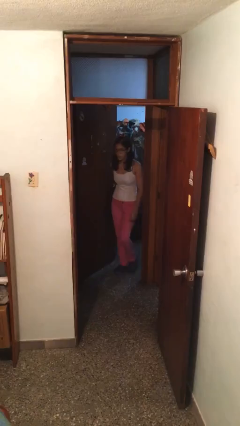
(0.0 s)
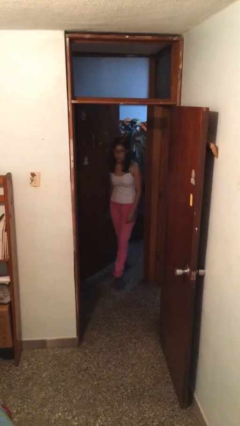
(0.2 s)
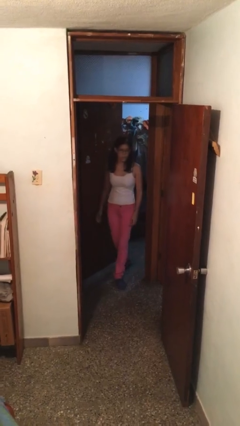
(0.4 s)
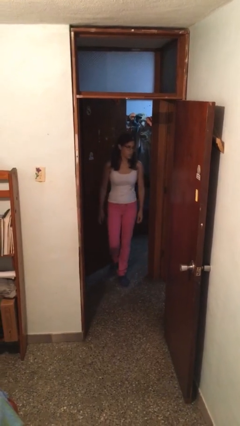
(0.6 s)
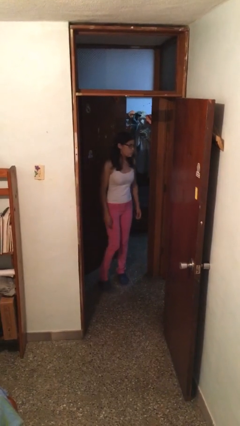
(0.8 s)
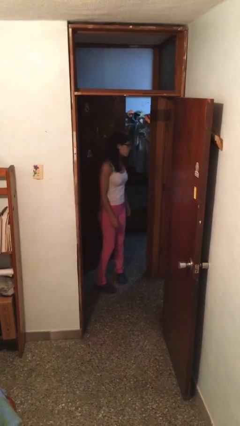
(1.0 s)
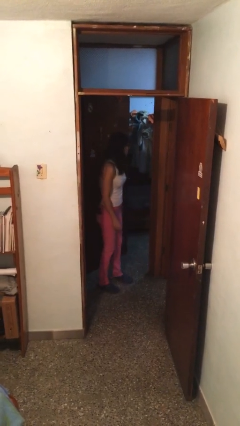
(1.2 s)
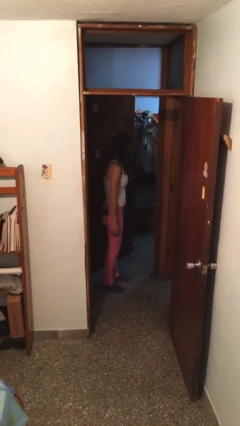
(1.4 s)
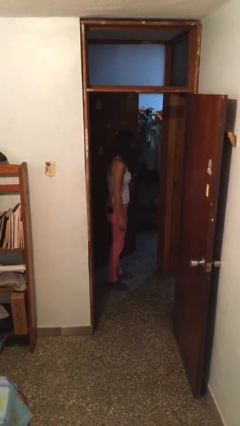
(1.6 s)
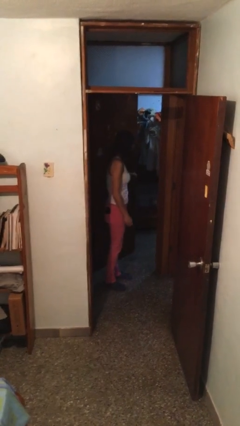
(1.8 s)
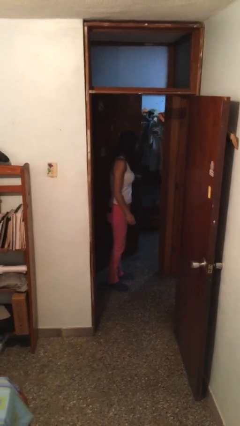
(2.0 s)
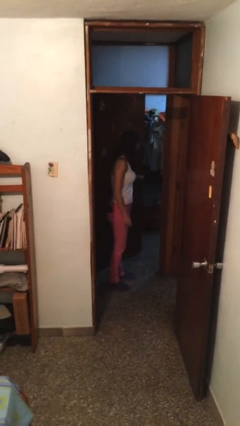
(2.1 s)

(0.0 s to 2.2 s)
person enters scene through structure

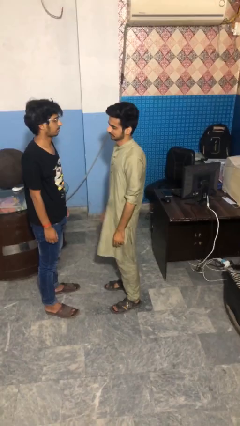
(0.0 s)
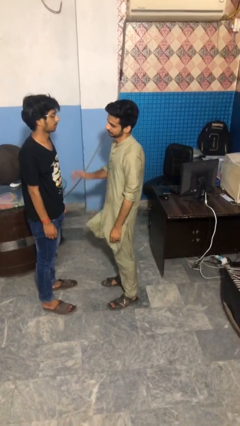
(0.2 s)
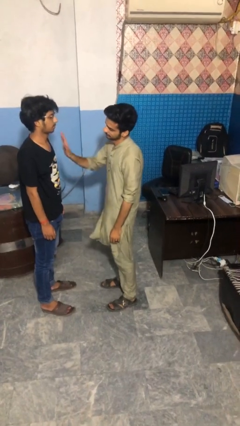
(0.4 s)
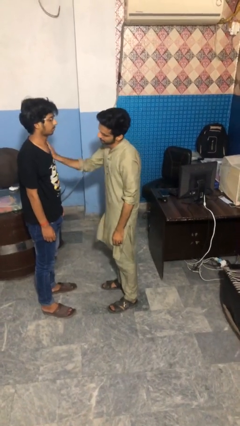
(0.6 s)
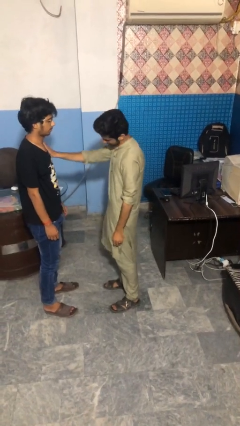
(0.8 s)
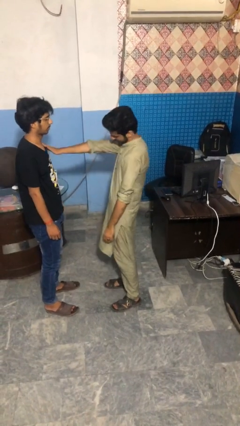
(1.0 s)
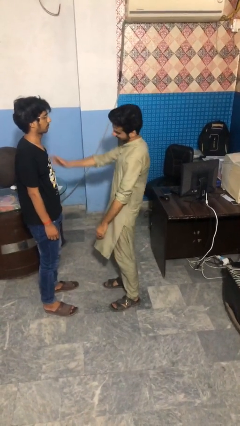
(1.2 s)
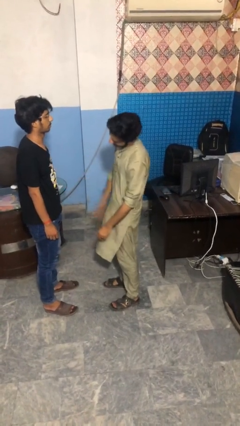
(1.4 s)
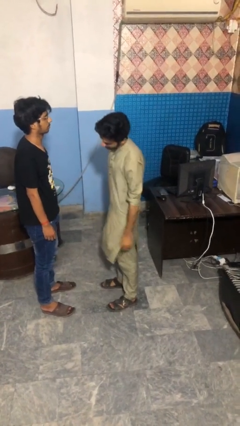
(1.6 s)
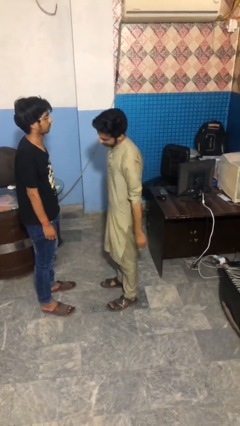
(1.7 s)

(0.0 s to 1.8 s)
person shoves person

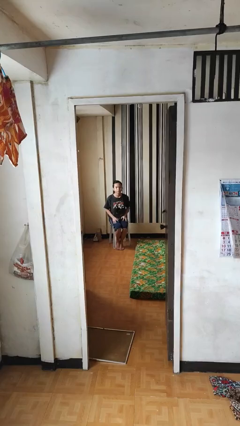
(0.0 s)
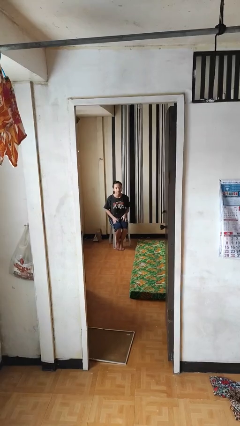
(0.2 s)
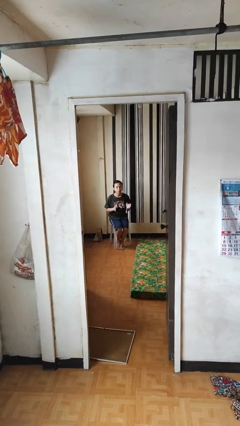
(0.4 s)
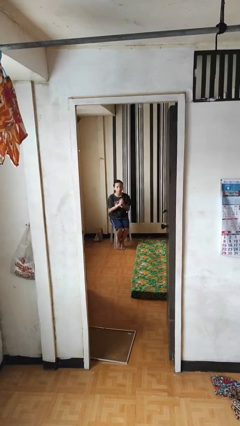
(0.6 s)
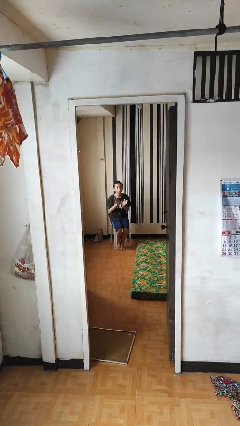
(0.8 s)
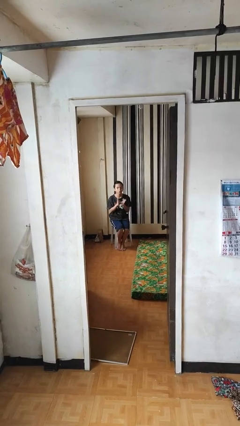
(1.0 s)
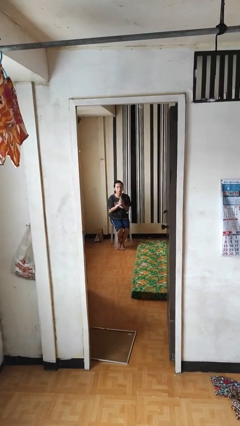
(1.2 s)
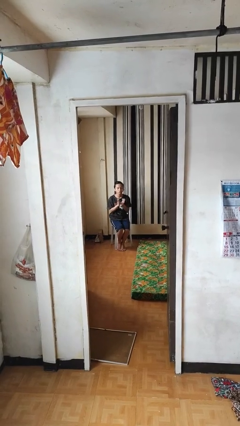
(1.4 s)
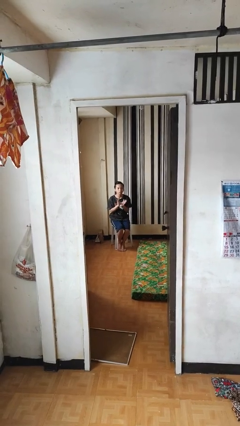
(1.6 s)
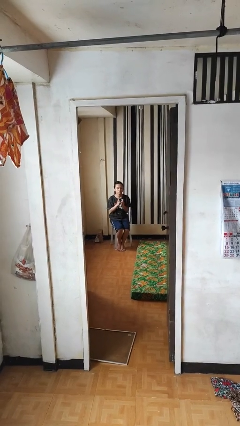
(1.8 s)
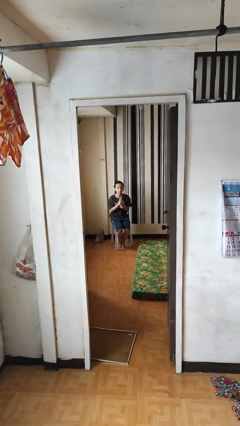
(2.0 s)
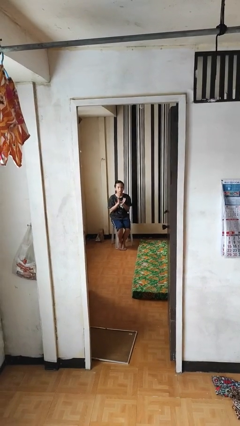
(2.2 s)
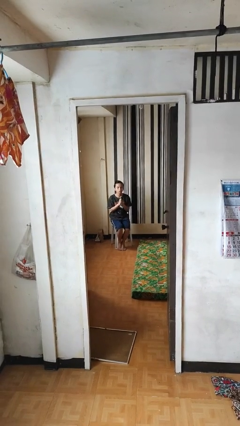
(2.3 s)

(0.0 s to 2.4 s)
person claps hands

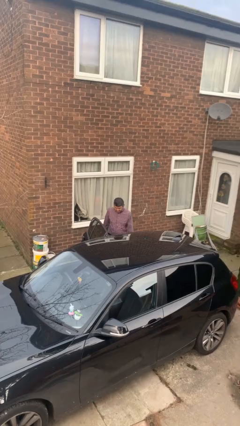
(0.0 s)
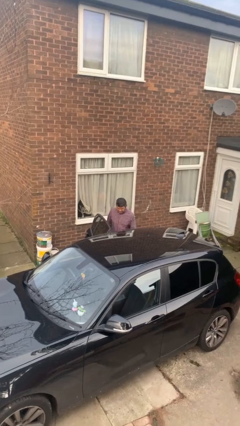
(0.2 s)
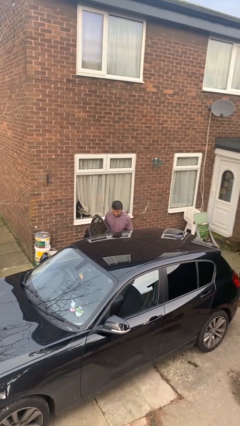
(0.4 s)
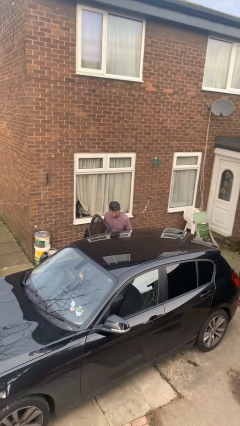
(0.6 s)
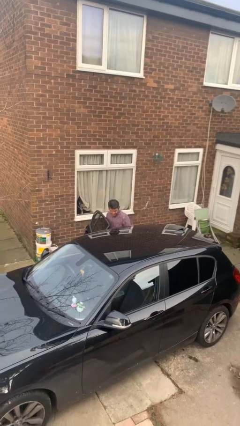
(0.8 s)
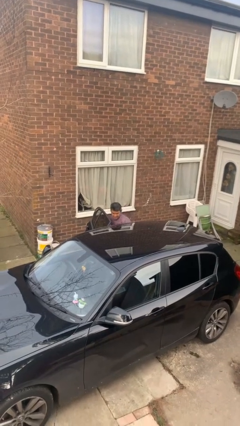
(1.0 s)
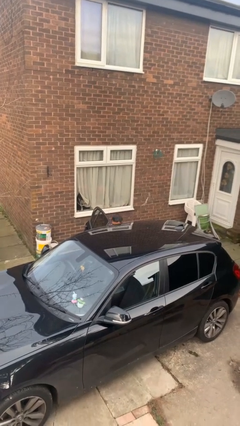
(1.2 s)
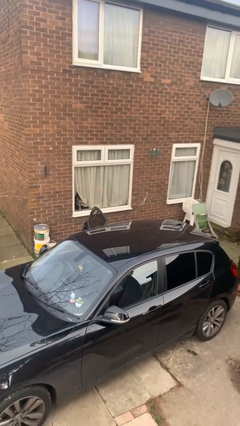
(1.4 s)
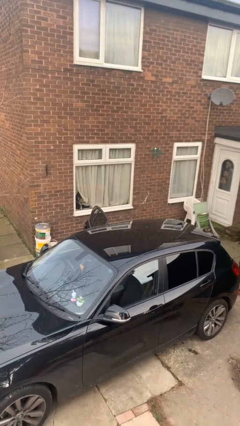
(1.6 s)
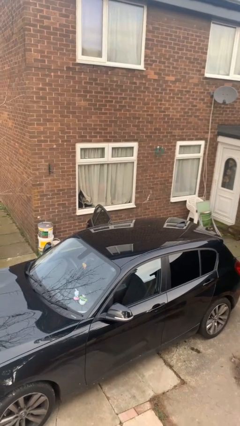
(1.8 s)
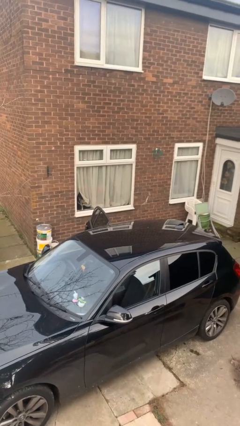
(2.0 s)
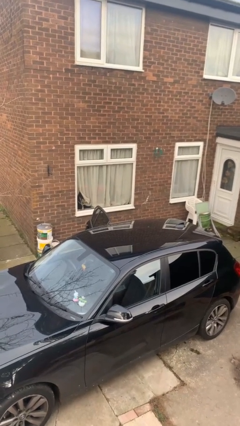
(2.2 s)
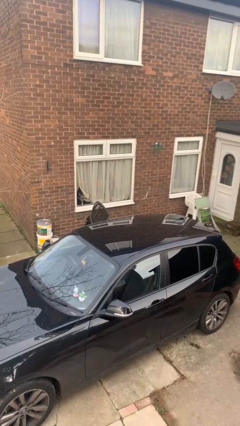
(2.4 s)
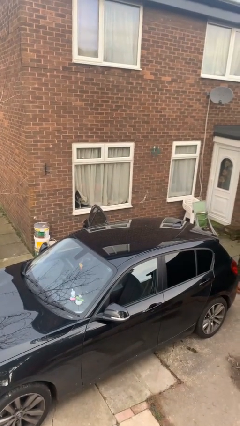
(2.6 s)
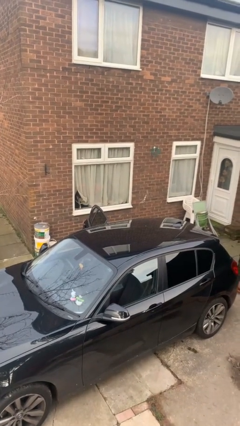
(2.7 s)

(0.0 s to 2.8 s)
person enters car

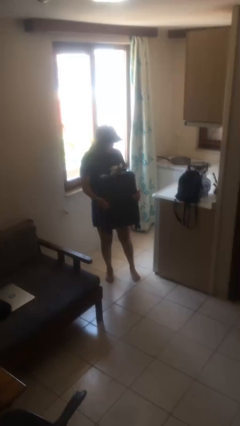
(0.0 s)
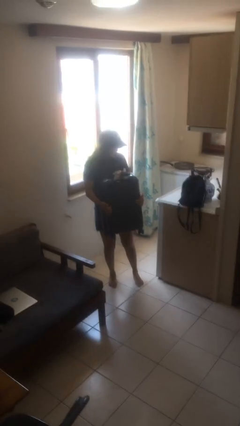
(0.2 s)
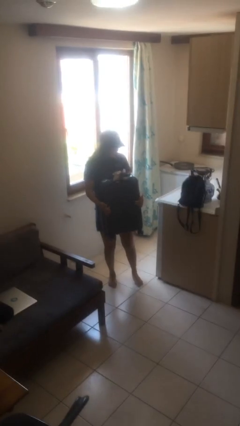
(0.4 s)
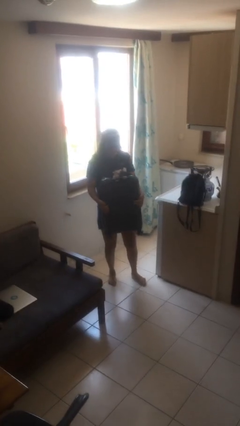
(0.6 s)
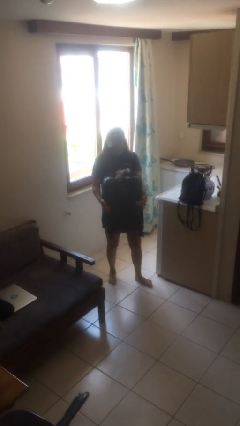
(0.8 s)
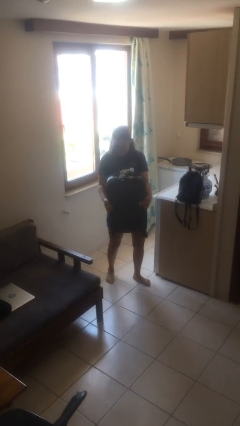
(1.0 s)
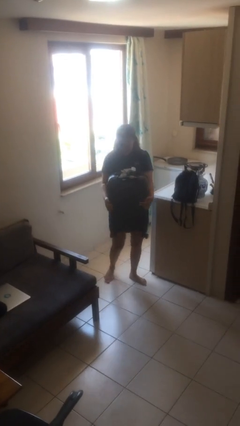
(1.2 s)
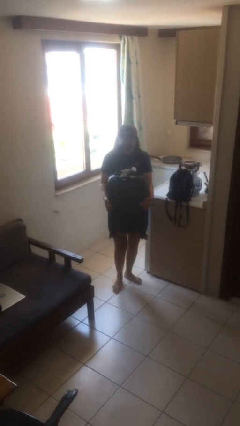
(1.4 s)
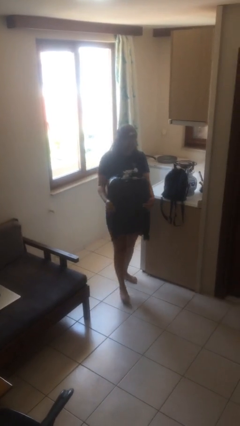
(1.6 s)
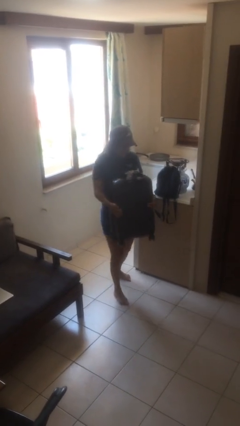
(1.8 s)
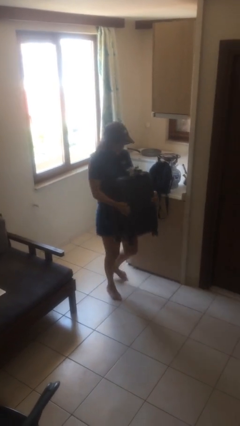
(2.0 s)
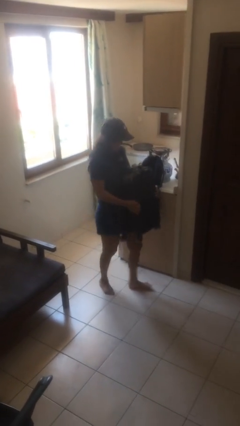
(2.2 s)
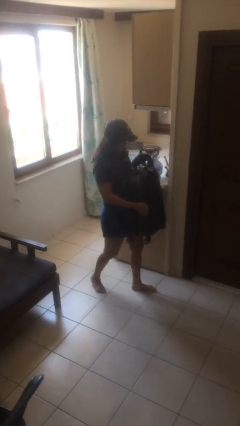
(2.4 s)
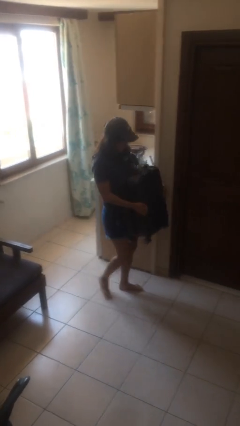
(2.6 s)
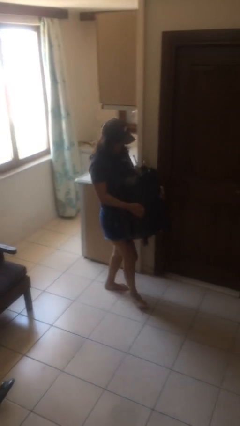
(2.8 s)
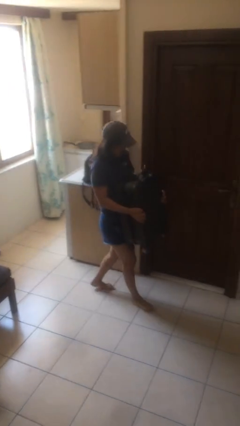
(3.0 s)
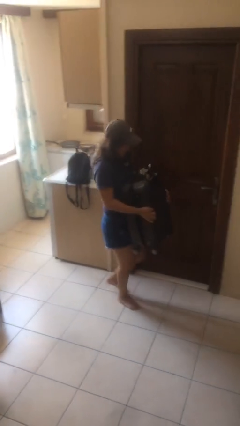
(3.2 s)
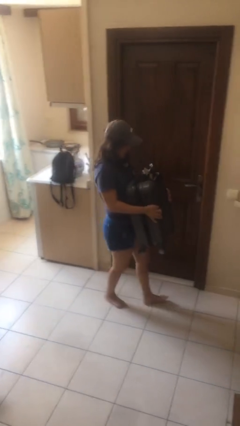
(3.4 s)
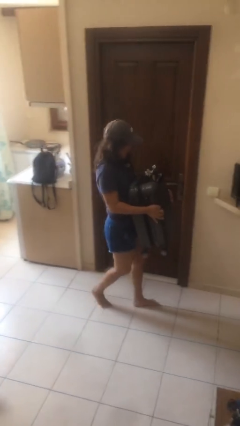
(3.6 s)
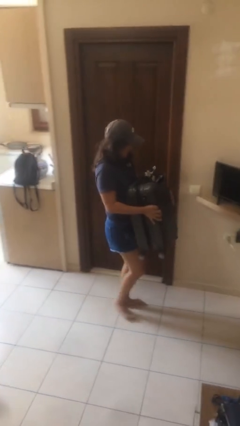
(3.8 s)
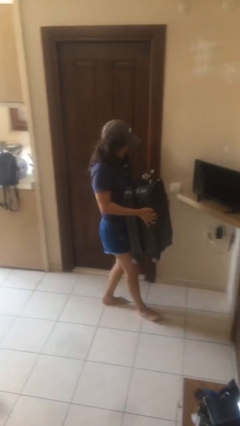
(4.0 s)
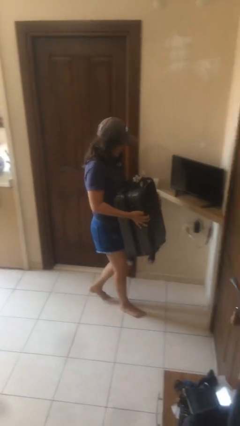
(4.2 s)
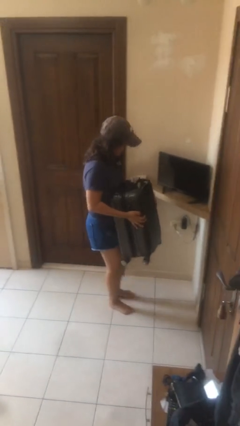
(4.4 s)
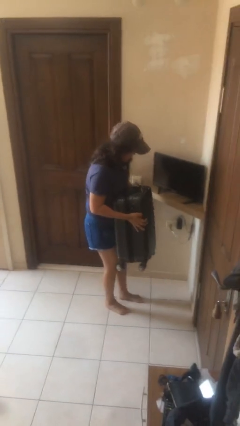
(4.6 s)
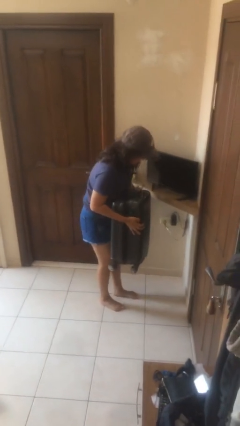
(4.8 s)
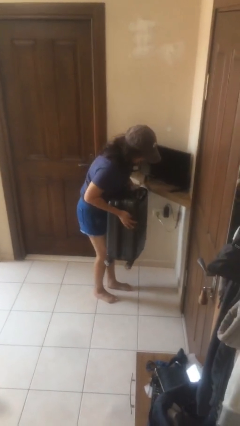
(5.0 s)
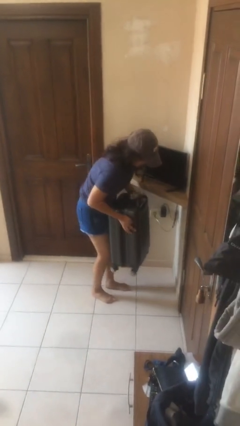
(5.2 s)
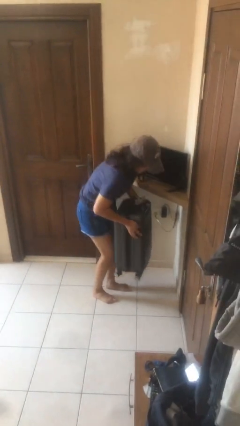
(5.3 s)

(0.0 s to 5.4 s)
person carries heavy object

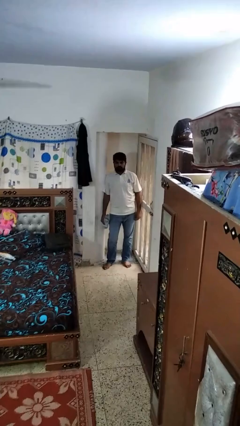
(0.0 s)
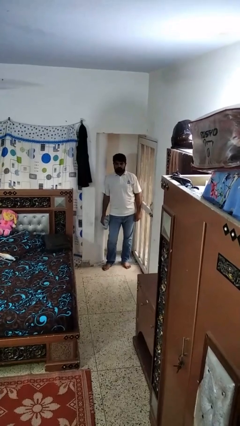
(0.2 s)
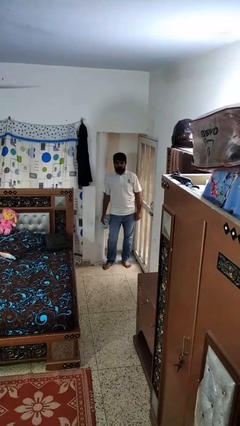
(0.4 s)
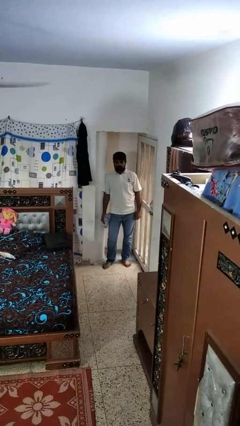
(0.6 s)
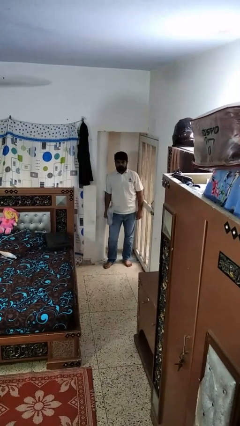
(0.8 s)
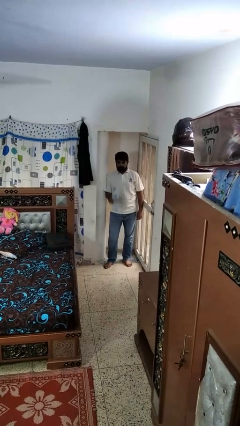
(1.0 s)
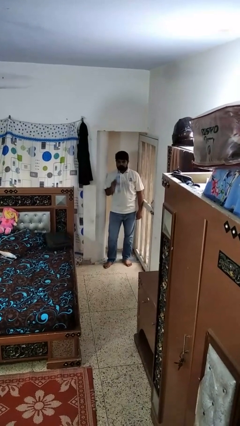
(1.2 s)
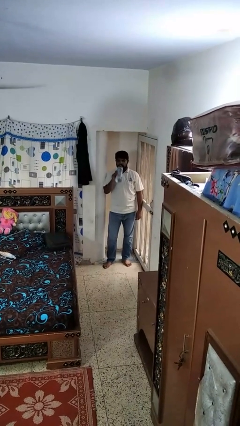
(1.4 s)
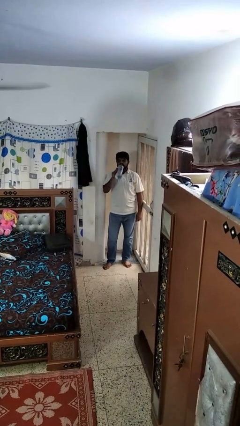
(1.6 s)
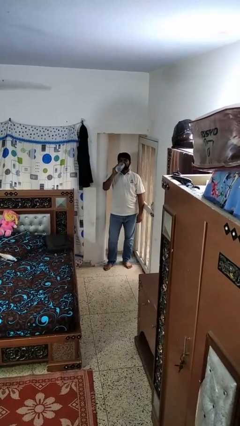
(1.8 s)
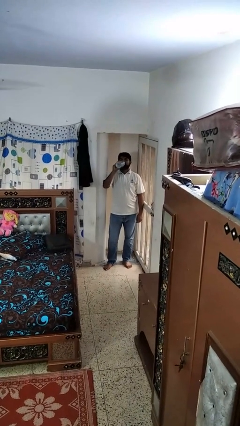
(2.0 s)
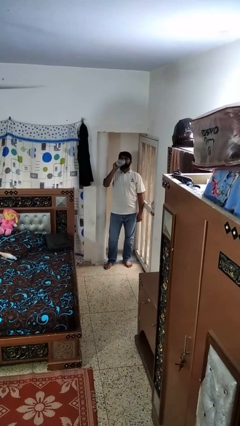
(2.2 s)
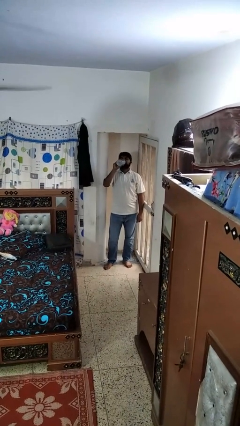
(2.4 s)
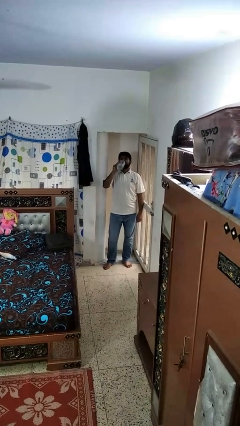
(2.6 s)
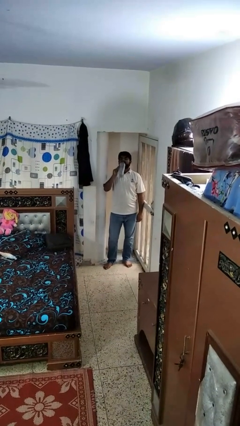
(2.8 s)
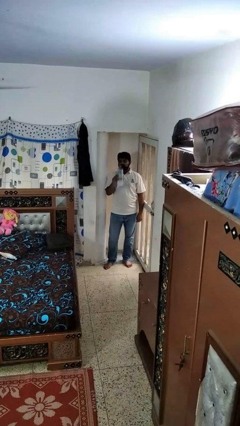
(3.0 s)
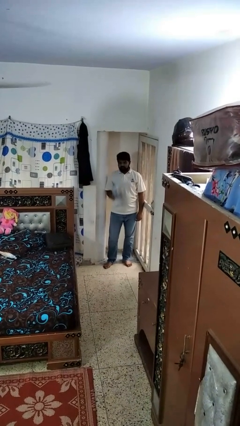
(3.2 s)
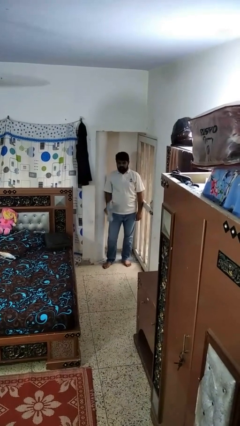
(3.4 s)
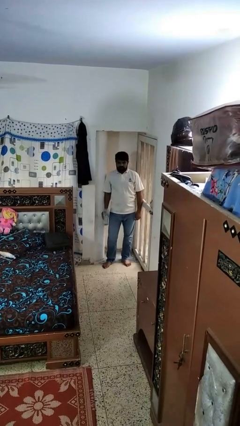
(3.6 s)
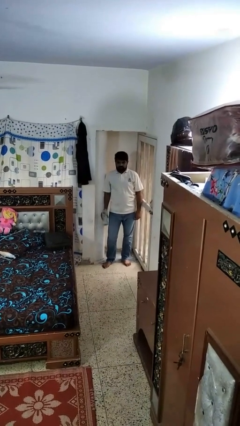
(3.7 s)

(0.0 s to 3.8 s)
person drinks from bottle
